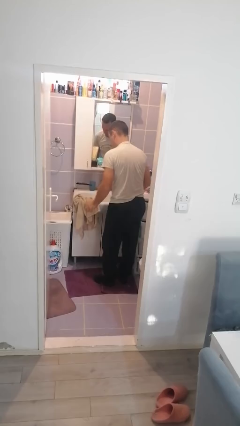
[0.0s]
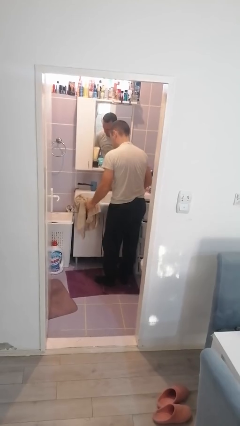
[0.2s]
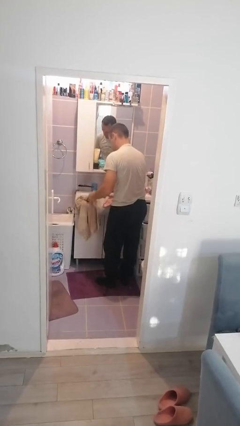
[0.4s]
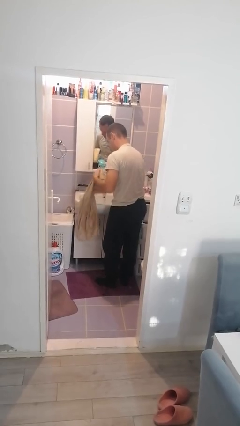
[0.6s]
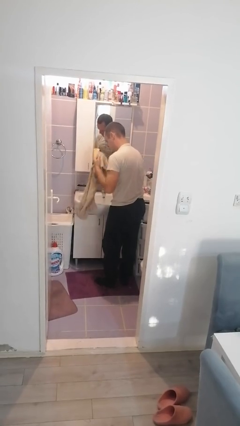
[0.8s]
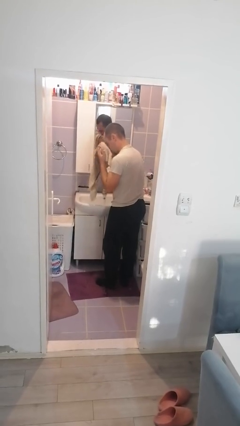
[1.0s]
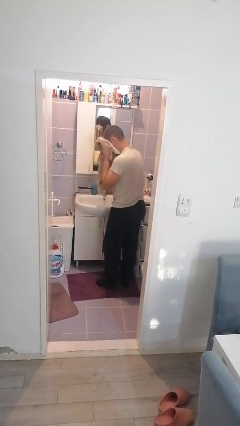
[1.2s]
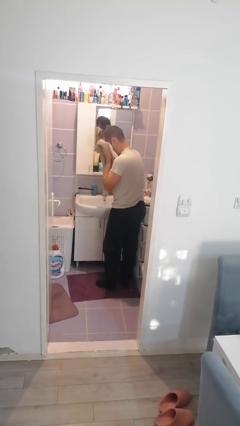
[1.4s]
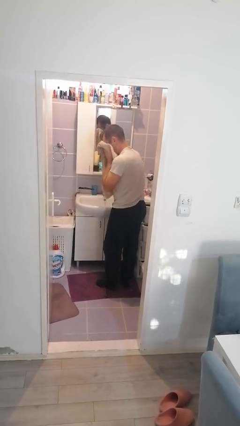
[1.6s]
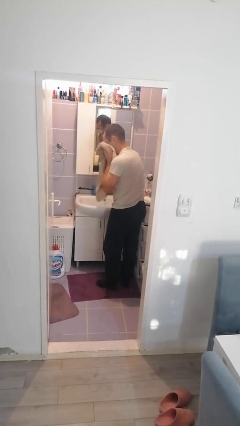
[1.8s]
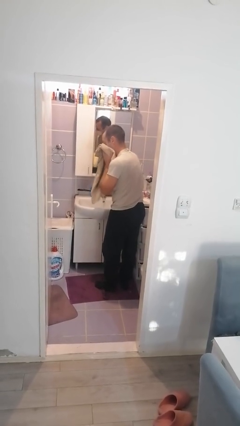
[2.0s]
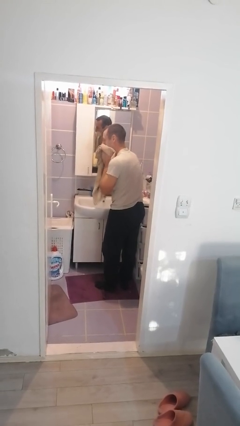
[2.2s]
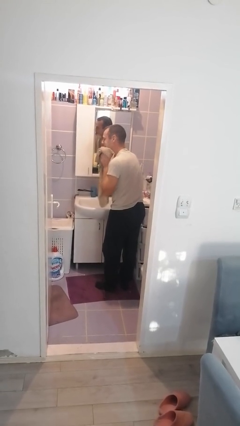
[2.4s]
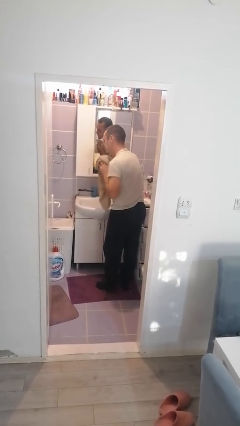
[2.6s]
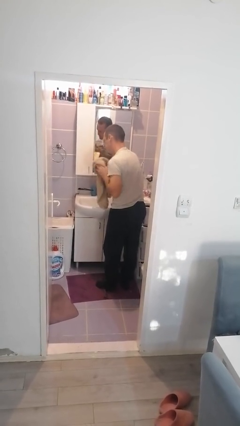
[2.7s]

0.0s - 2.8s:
person dries face with towel

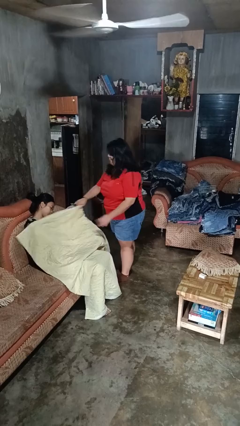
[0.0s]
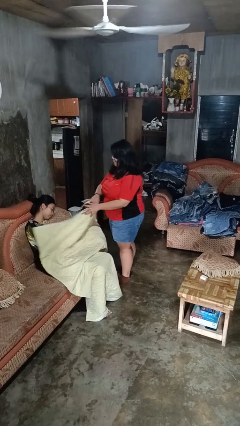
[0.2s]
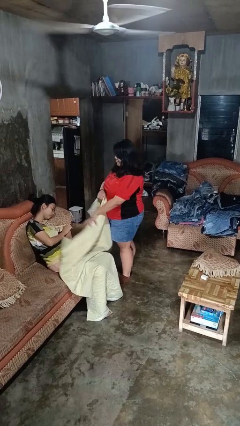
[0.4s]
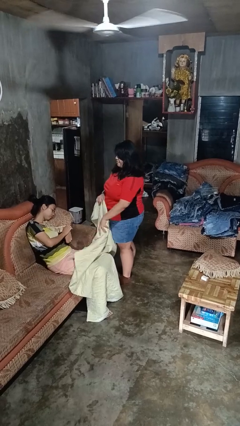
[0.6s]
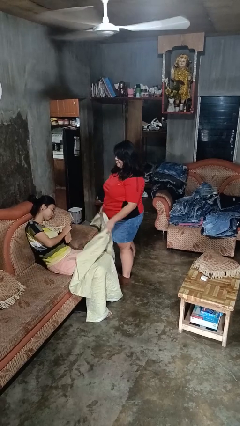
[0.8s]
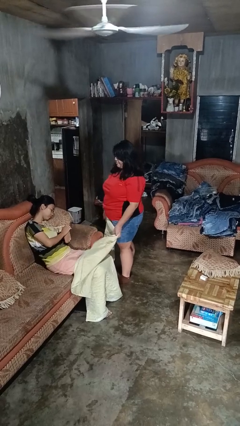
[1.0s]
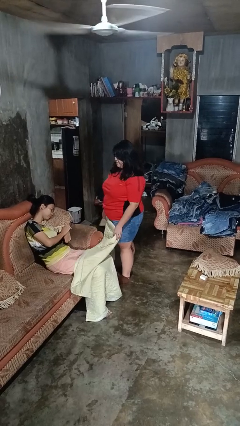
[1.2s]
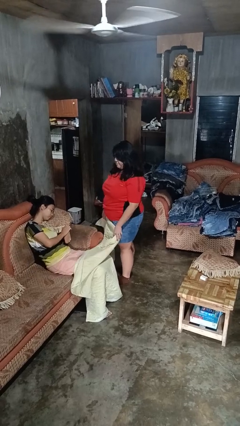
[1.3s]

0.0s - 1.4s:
person uncovers friend with blanket

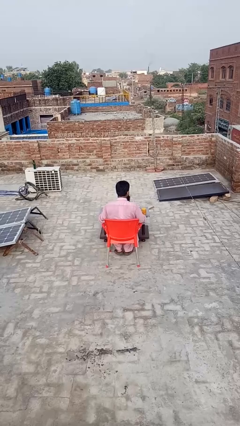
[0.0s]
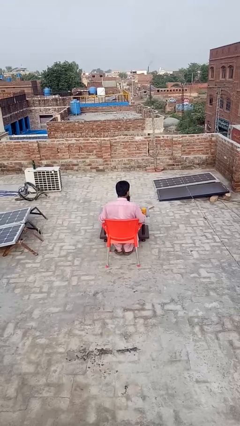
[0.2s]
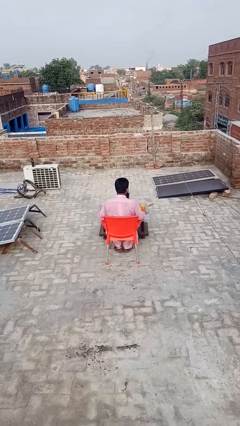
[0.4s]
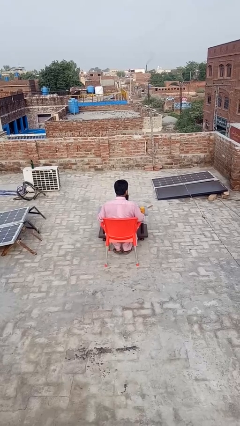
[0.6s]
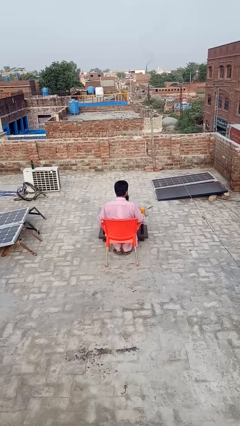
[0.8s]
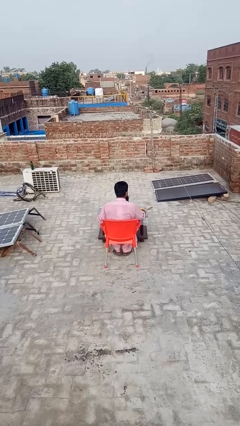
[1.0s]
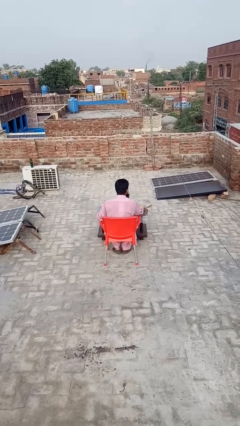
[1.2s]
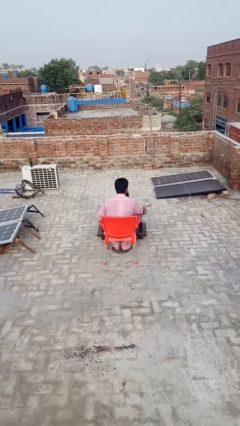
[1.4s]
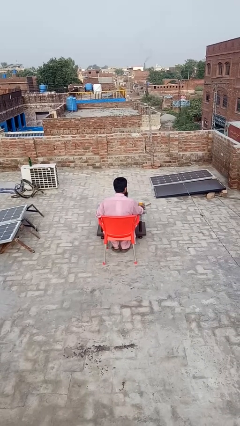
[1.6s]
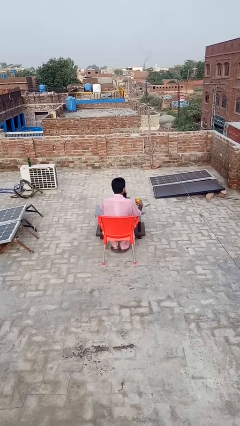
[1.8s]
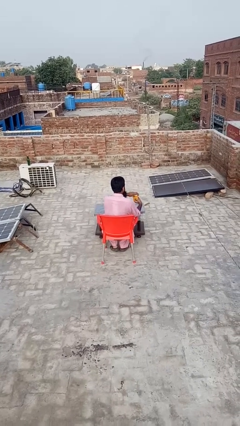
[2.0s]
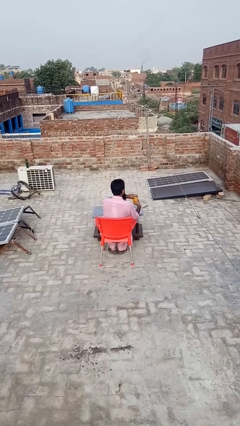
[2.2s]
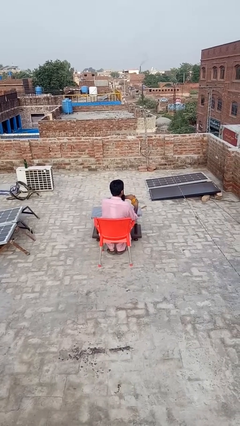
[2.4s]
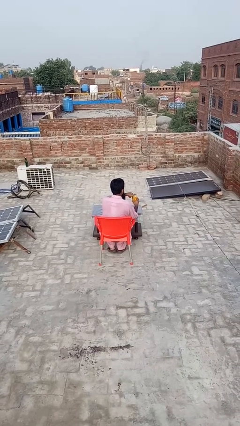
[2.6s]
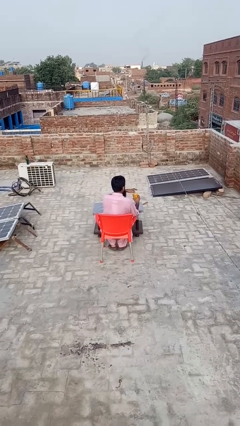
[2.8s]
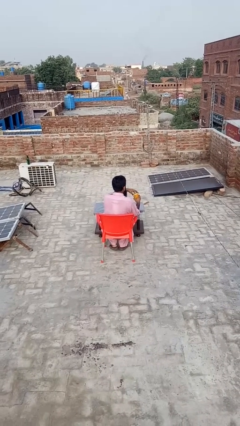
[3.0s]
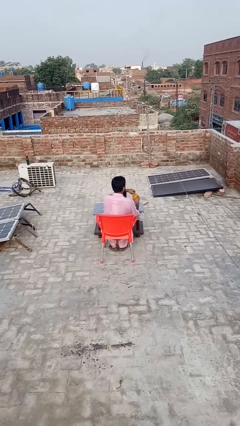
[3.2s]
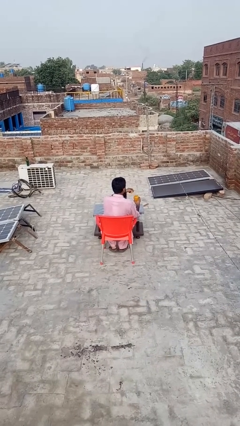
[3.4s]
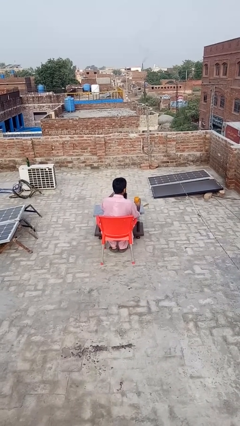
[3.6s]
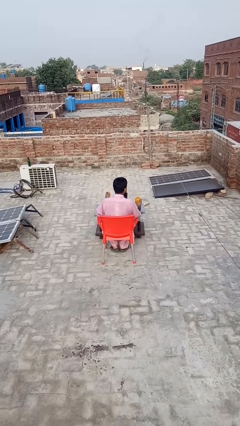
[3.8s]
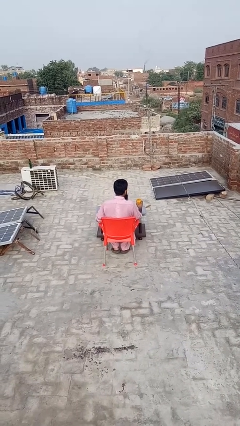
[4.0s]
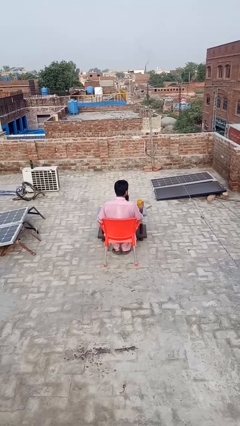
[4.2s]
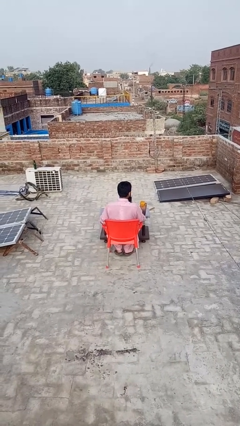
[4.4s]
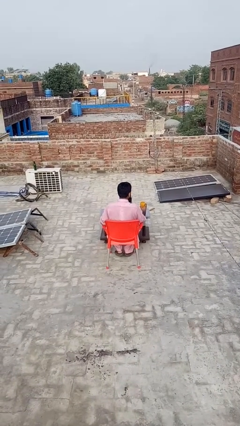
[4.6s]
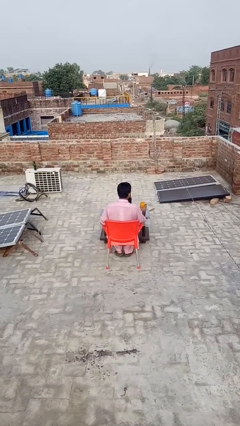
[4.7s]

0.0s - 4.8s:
person opens jar

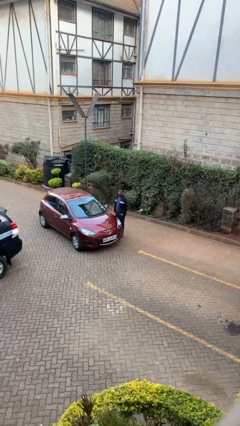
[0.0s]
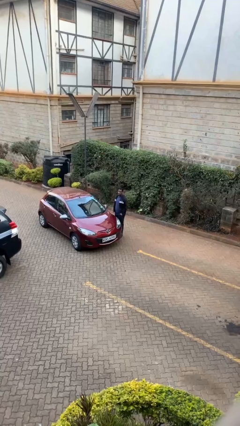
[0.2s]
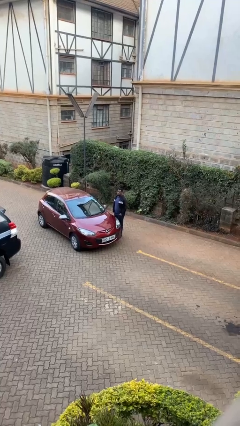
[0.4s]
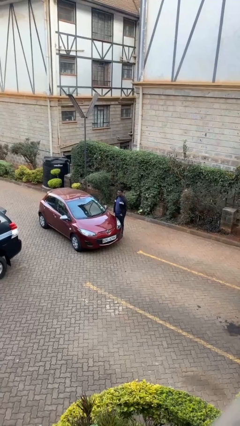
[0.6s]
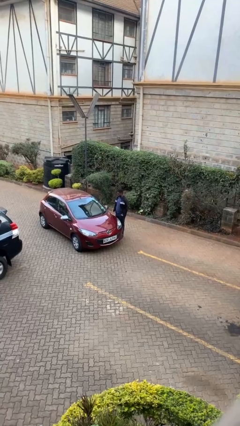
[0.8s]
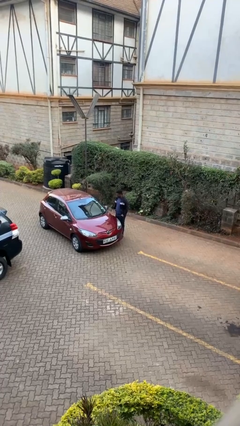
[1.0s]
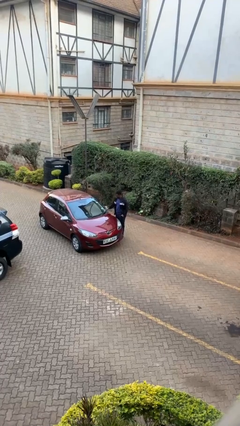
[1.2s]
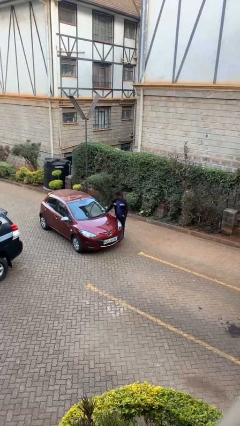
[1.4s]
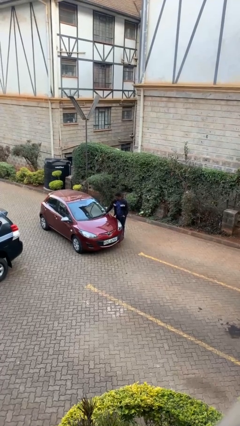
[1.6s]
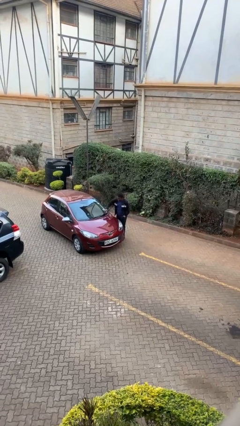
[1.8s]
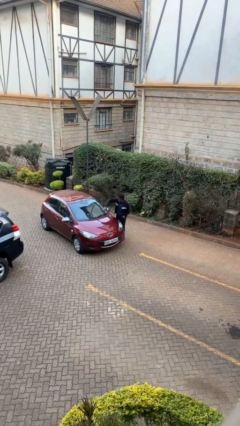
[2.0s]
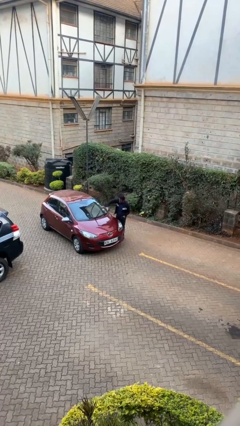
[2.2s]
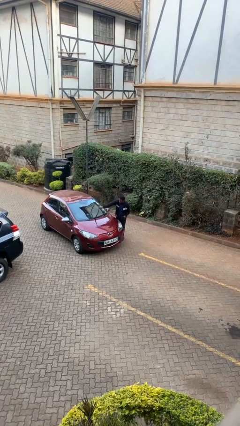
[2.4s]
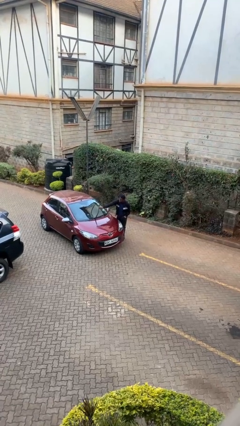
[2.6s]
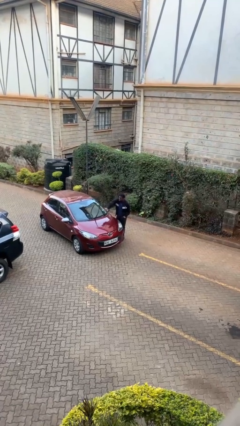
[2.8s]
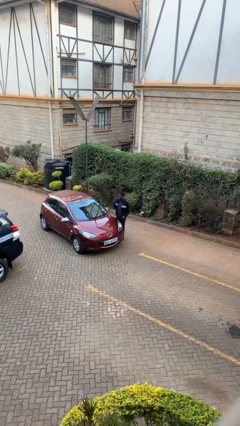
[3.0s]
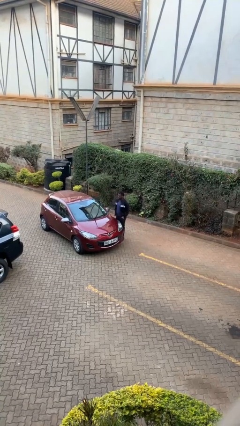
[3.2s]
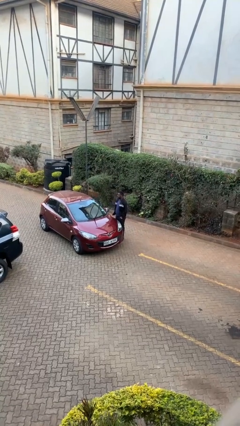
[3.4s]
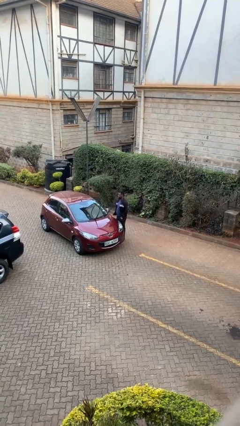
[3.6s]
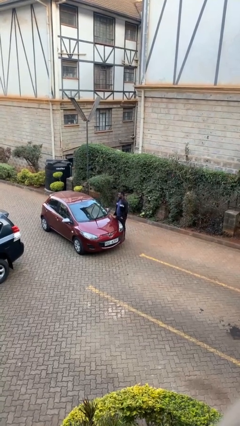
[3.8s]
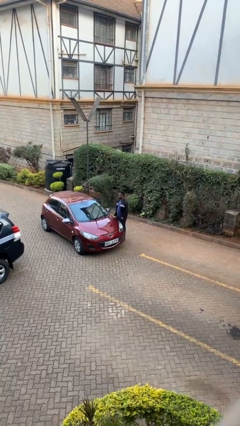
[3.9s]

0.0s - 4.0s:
person flips up car wipers

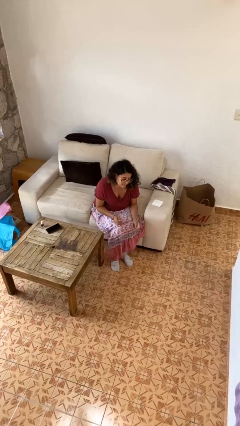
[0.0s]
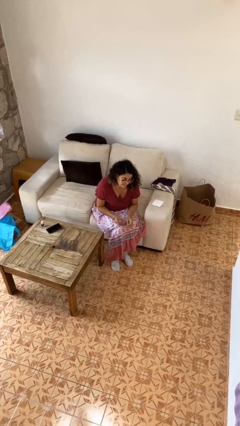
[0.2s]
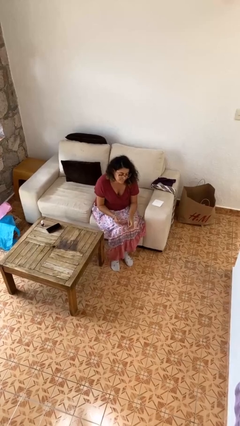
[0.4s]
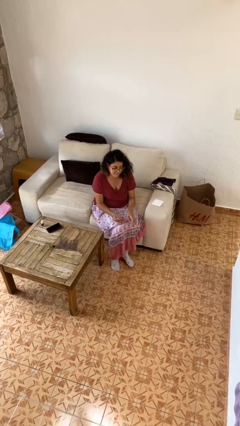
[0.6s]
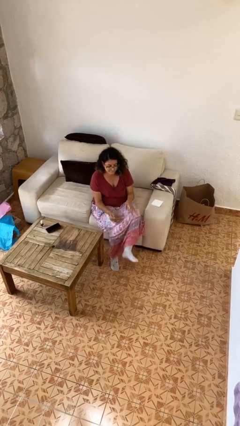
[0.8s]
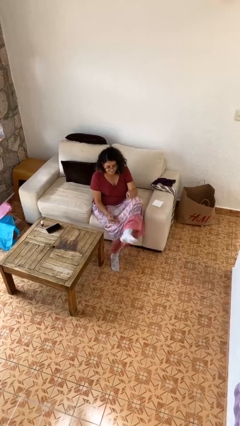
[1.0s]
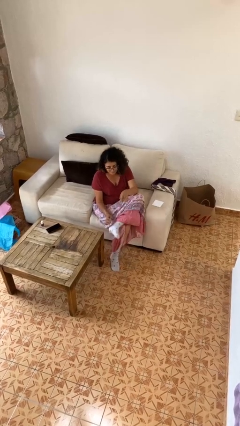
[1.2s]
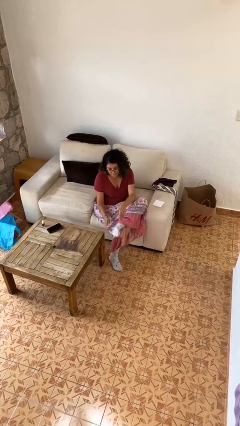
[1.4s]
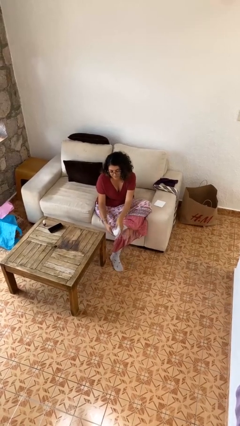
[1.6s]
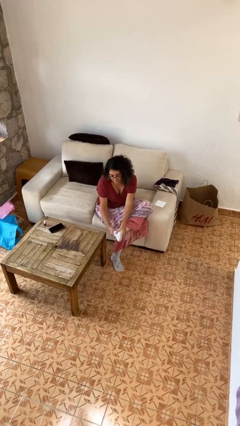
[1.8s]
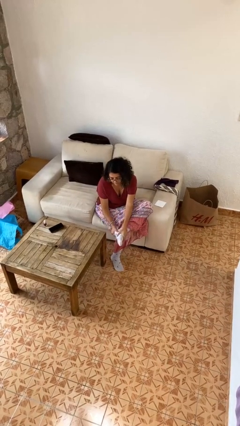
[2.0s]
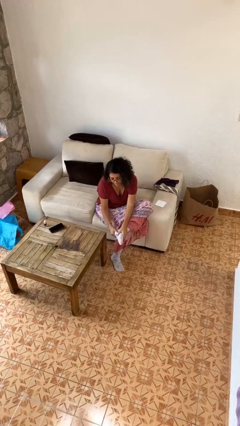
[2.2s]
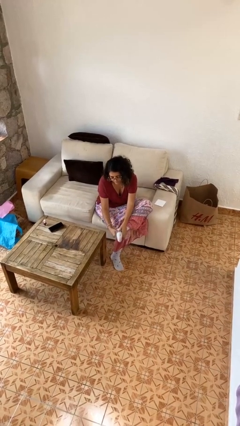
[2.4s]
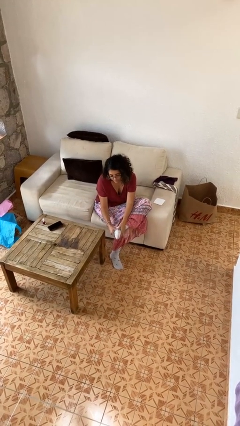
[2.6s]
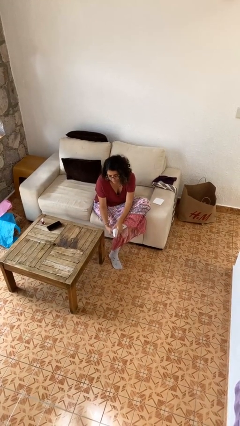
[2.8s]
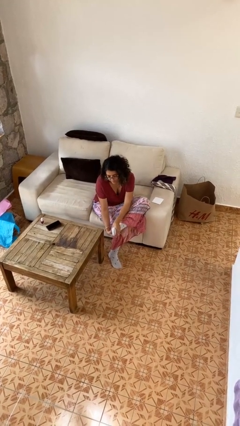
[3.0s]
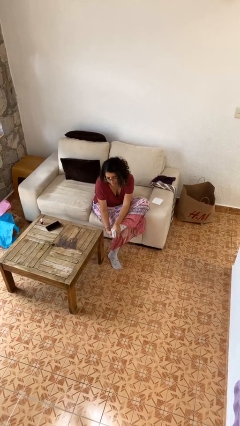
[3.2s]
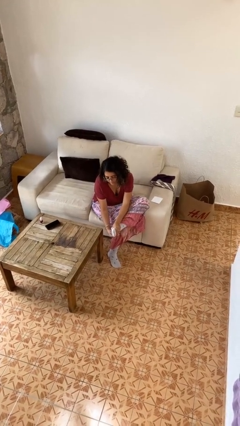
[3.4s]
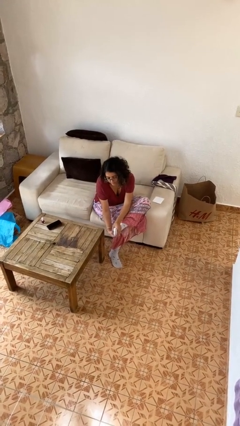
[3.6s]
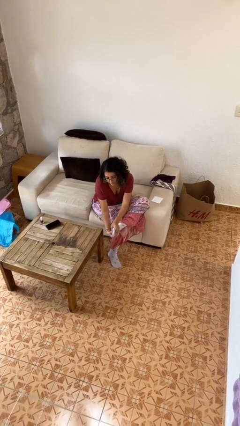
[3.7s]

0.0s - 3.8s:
person rubs foot

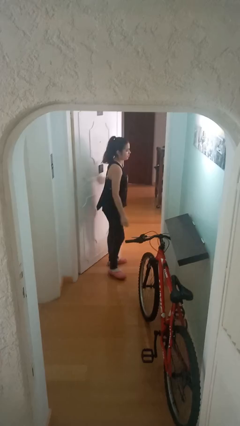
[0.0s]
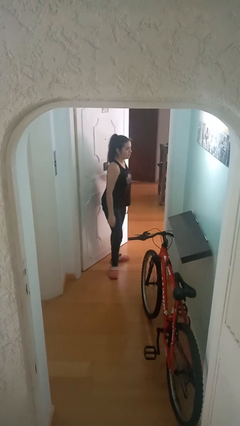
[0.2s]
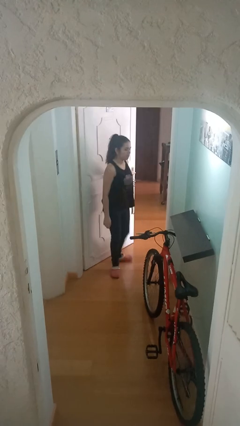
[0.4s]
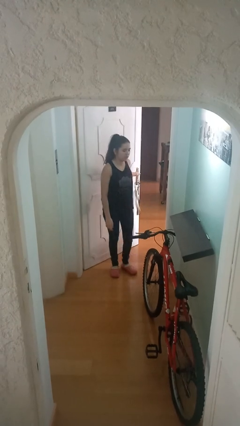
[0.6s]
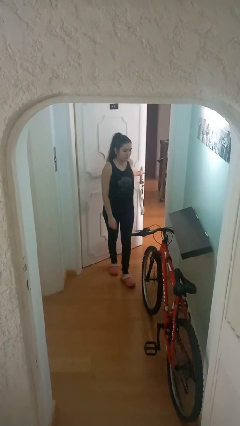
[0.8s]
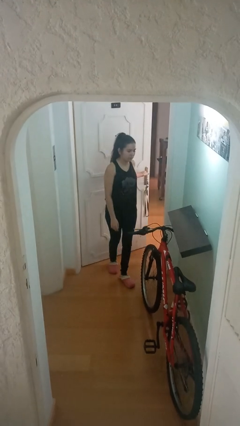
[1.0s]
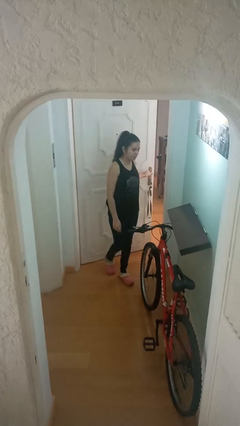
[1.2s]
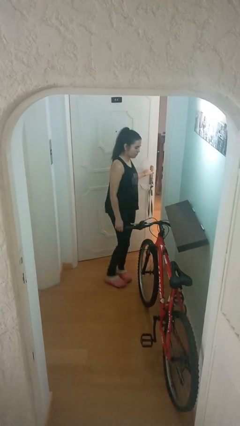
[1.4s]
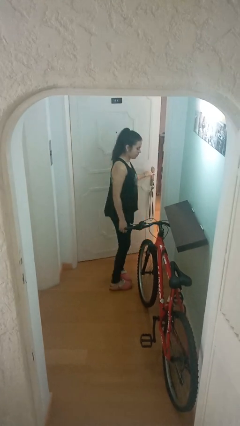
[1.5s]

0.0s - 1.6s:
person closes facility door
